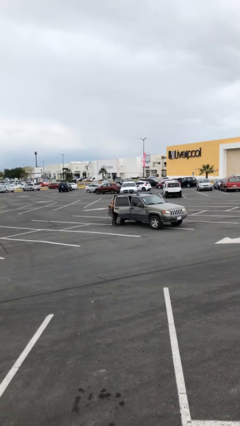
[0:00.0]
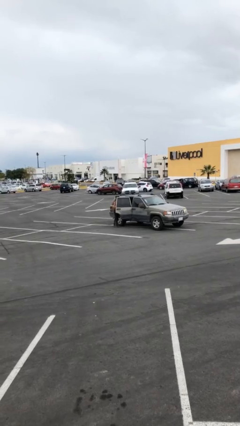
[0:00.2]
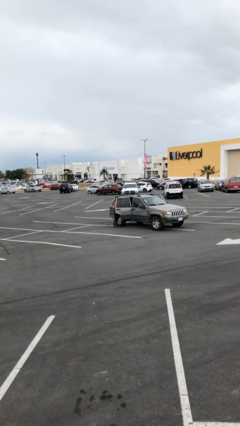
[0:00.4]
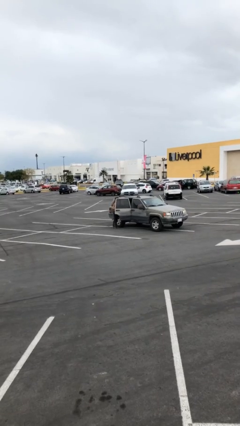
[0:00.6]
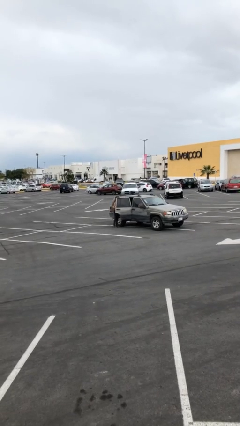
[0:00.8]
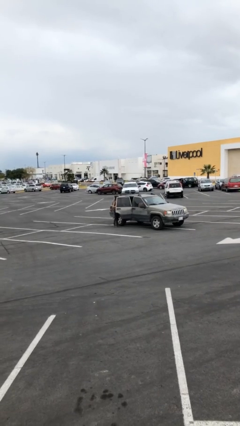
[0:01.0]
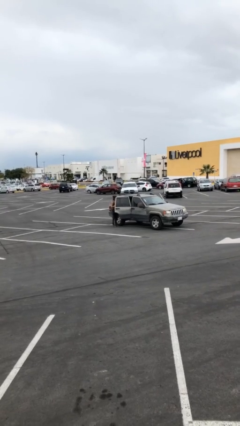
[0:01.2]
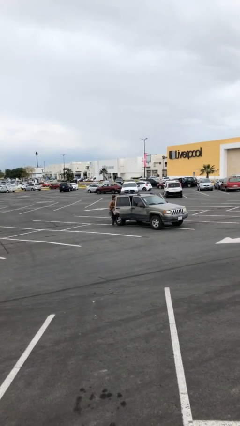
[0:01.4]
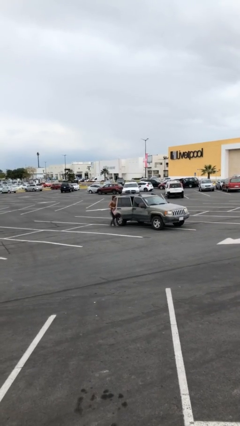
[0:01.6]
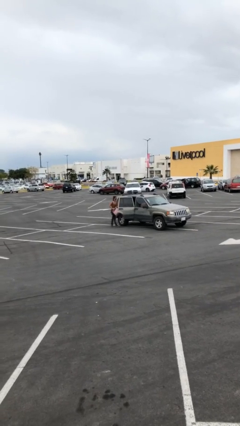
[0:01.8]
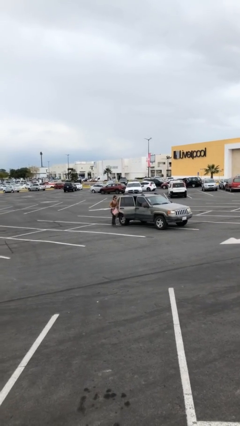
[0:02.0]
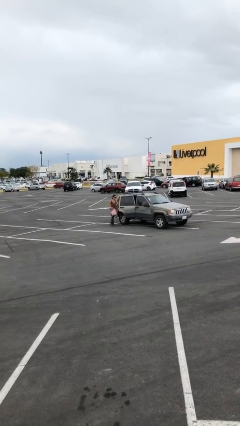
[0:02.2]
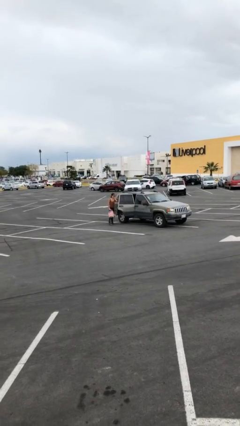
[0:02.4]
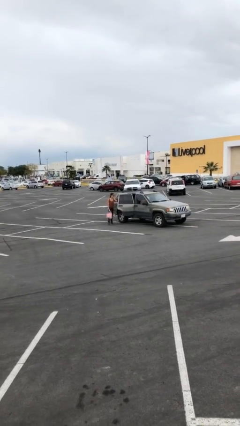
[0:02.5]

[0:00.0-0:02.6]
person unloads car

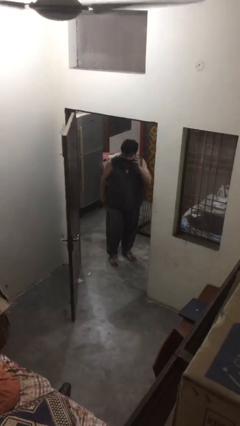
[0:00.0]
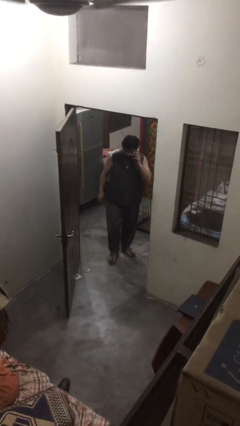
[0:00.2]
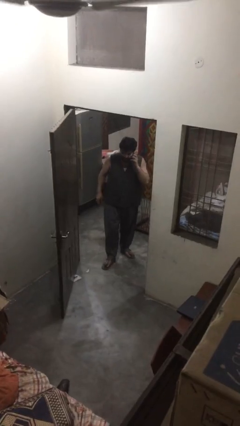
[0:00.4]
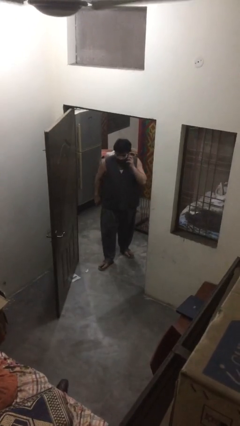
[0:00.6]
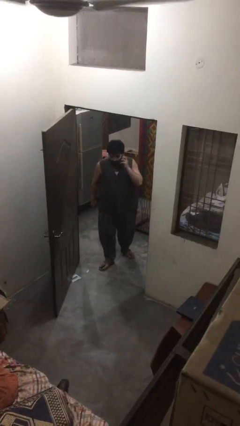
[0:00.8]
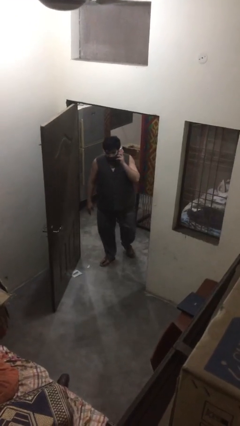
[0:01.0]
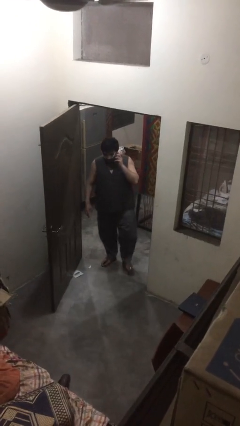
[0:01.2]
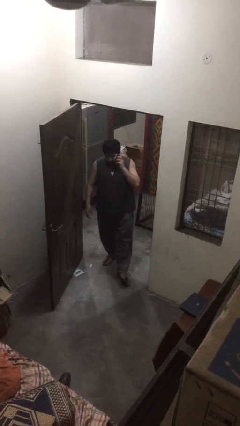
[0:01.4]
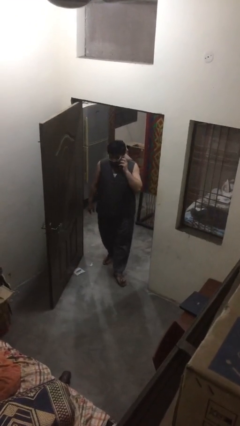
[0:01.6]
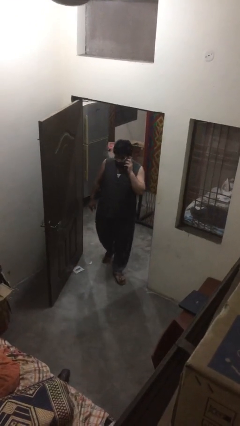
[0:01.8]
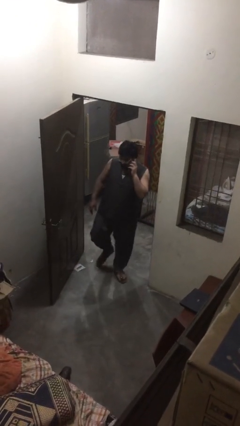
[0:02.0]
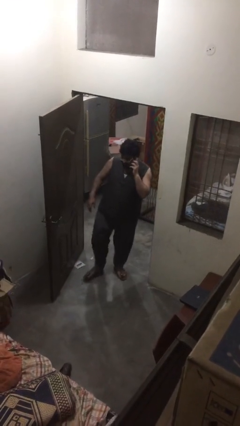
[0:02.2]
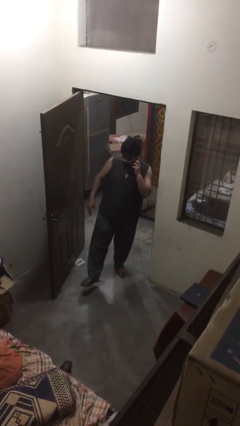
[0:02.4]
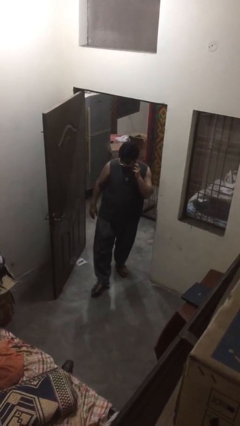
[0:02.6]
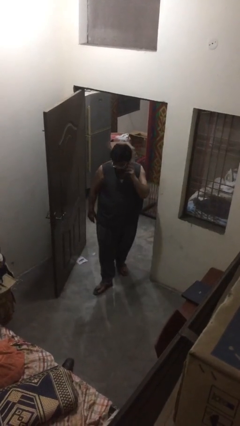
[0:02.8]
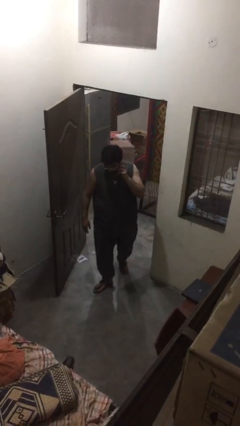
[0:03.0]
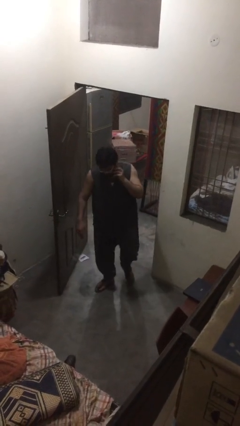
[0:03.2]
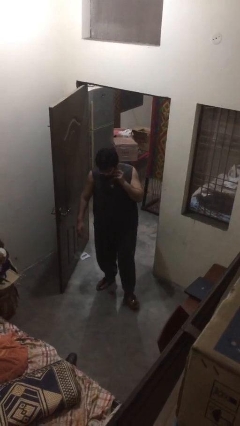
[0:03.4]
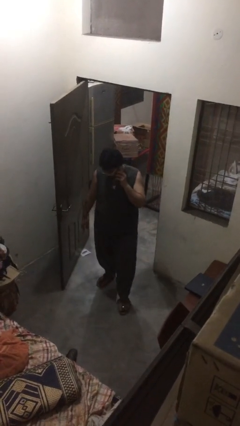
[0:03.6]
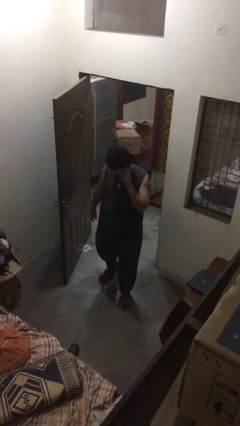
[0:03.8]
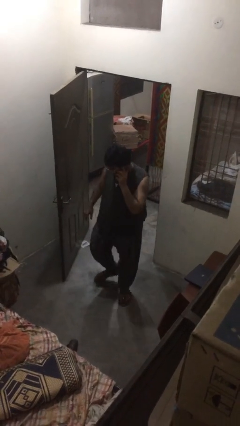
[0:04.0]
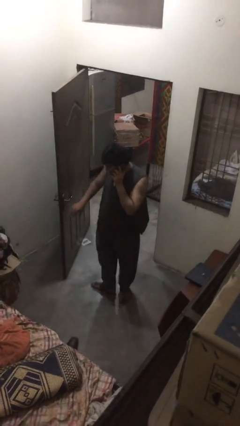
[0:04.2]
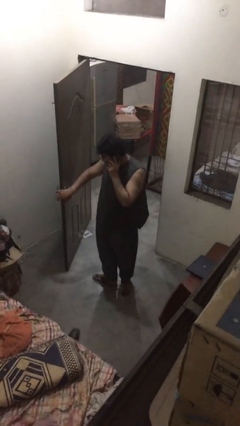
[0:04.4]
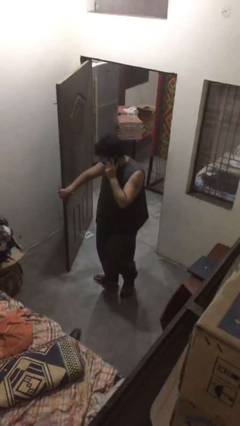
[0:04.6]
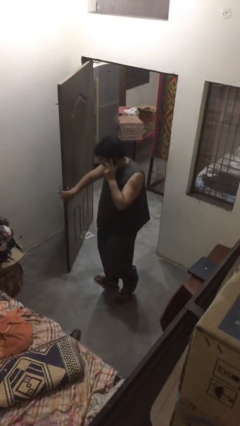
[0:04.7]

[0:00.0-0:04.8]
person enters scene through structure

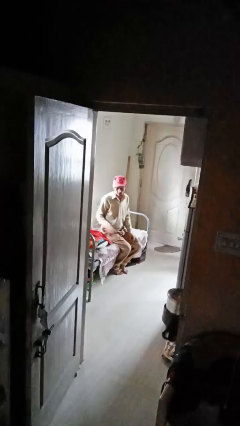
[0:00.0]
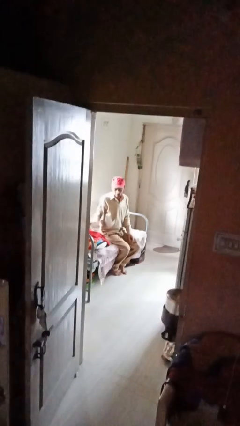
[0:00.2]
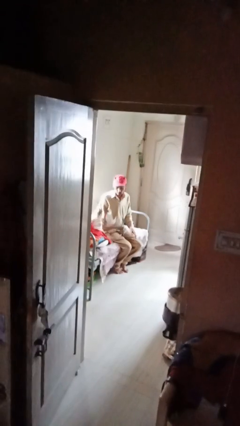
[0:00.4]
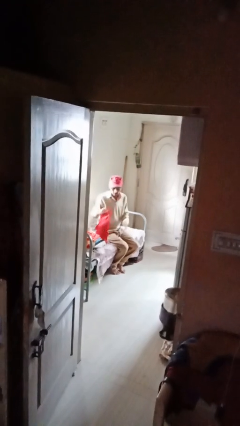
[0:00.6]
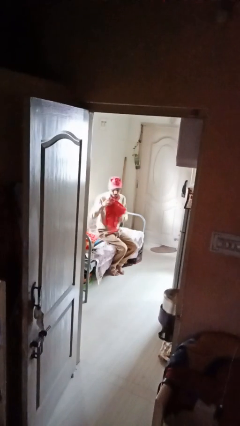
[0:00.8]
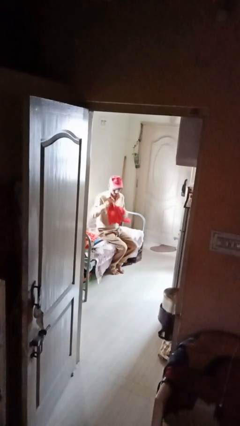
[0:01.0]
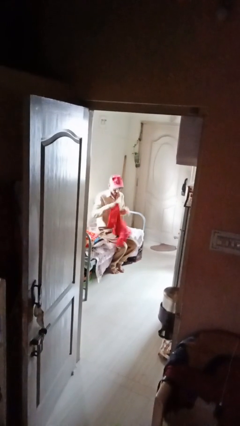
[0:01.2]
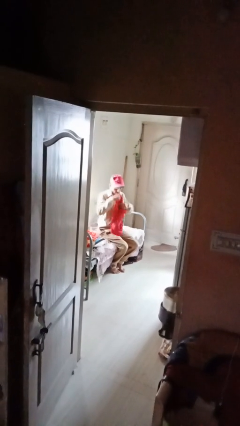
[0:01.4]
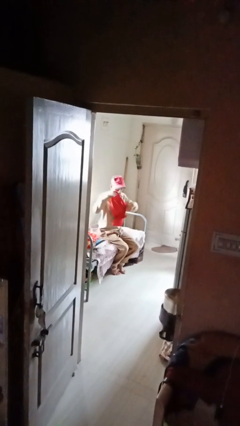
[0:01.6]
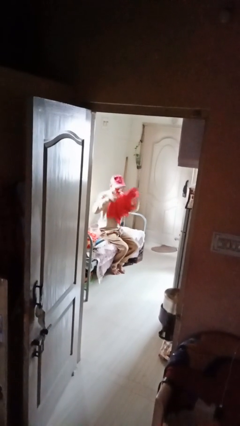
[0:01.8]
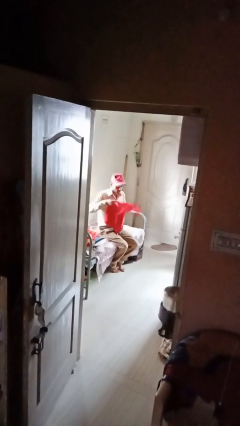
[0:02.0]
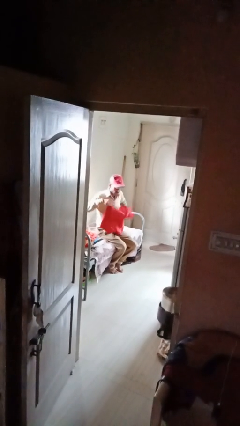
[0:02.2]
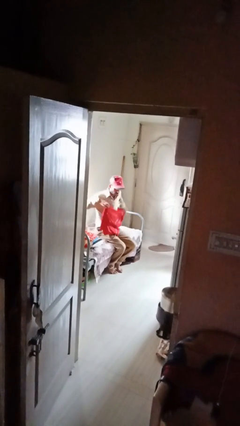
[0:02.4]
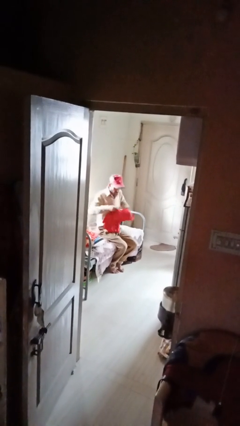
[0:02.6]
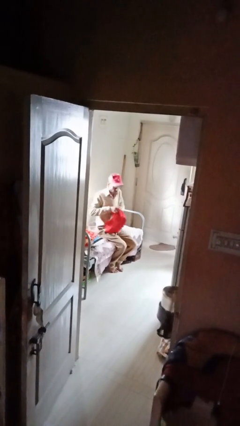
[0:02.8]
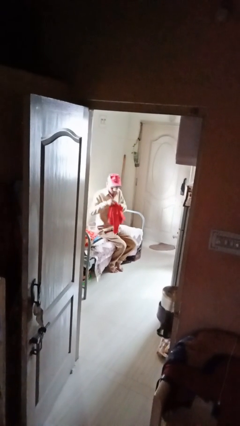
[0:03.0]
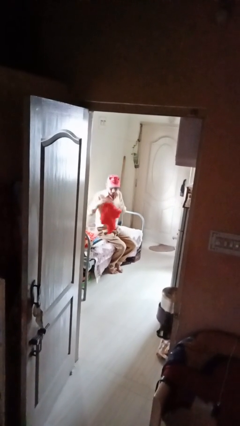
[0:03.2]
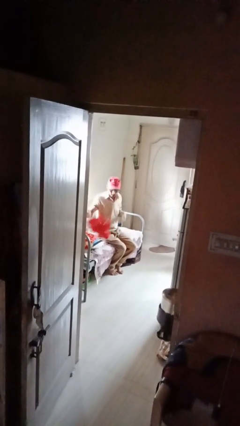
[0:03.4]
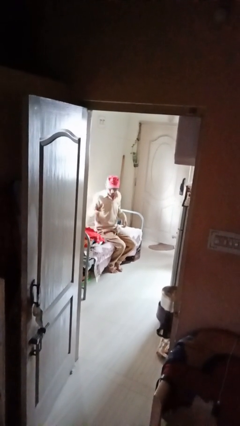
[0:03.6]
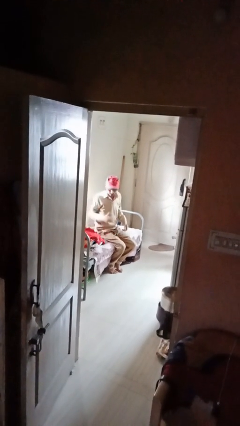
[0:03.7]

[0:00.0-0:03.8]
person folds shirt

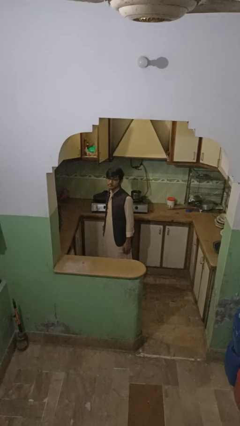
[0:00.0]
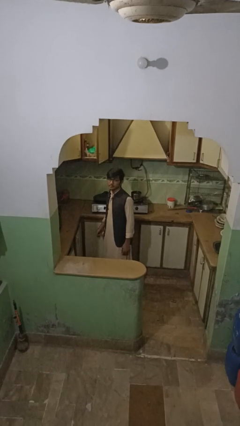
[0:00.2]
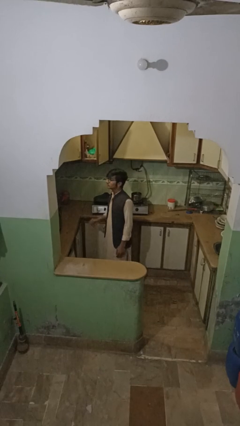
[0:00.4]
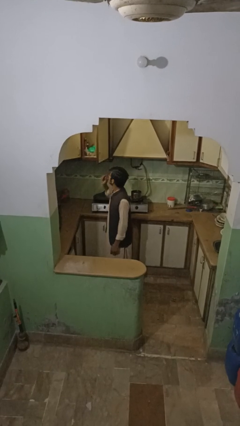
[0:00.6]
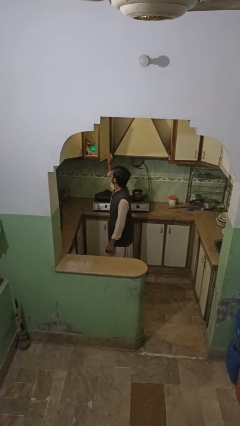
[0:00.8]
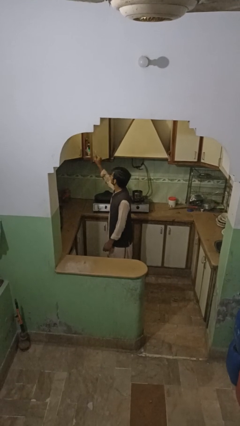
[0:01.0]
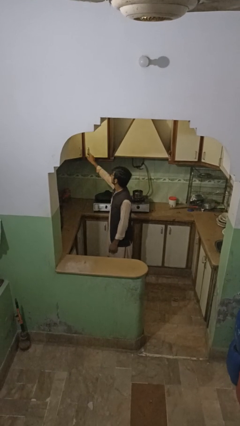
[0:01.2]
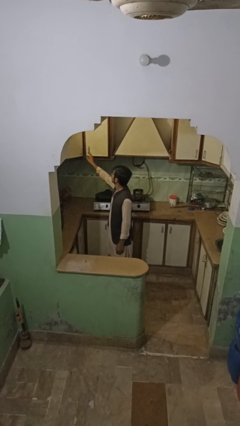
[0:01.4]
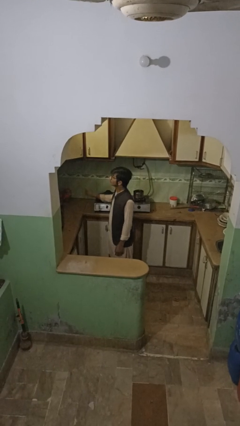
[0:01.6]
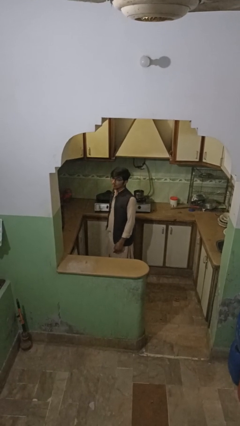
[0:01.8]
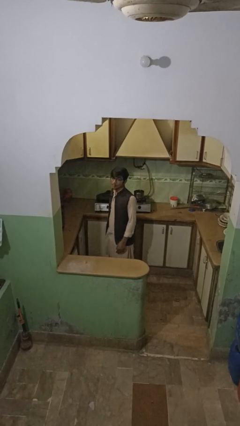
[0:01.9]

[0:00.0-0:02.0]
person closes cabinet

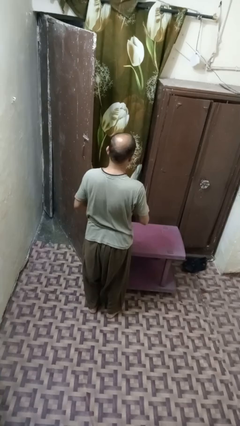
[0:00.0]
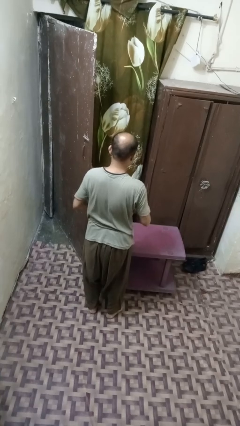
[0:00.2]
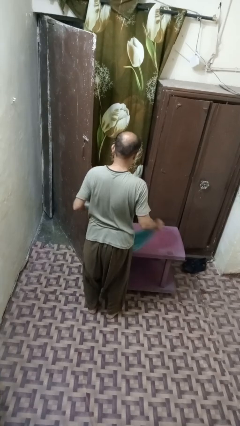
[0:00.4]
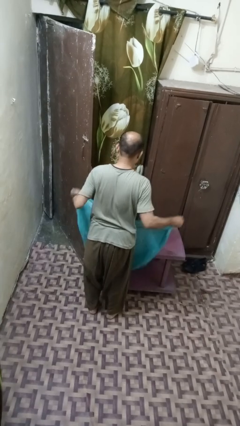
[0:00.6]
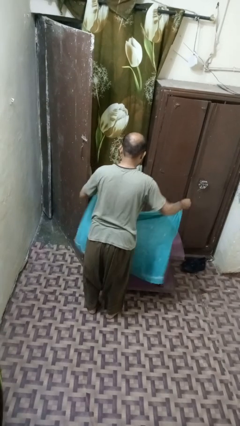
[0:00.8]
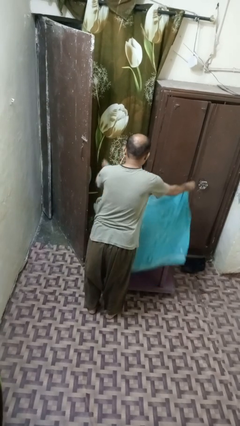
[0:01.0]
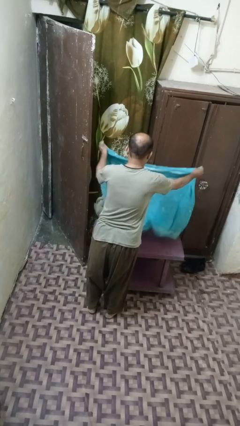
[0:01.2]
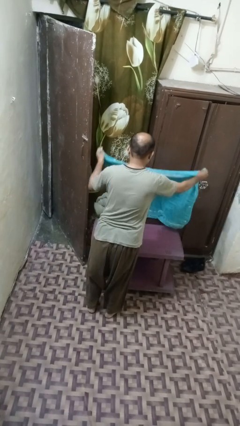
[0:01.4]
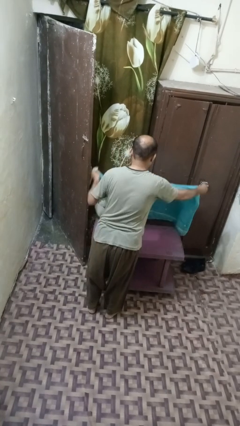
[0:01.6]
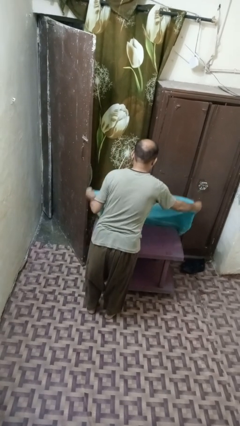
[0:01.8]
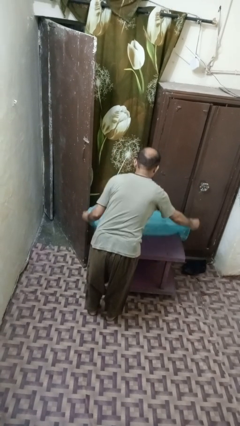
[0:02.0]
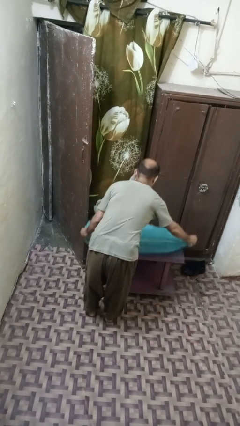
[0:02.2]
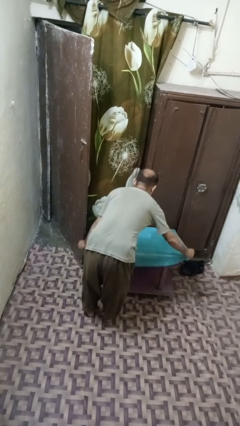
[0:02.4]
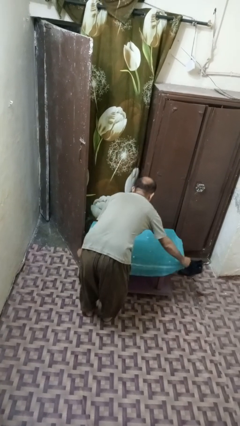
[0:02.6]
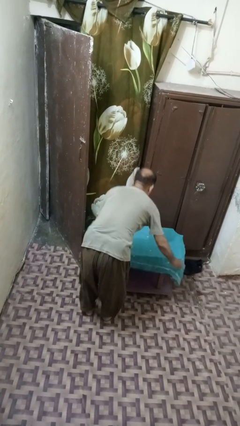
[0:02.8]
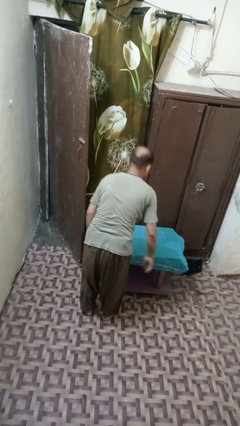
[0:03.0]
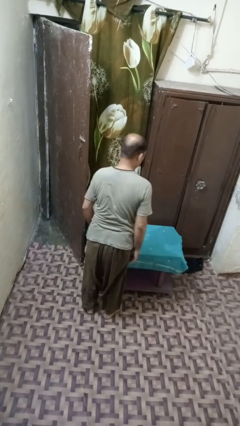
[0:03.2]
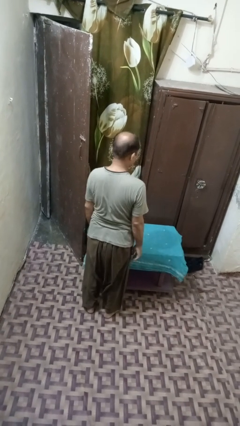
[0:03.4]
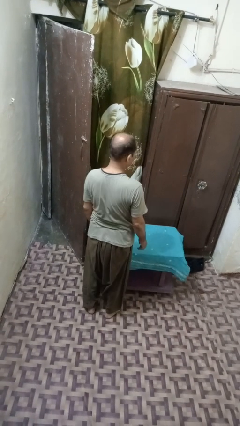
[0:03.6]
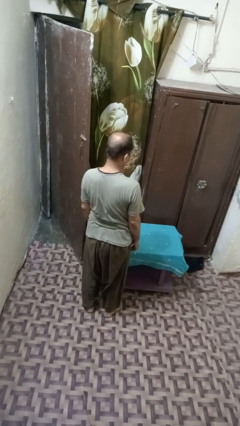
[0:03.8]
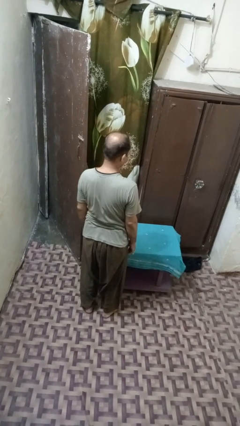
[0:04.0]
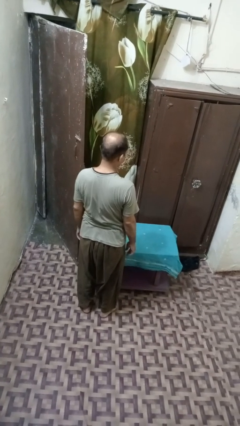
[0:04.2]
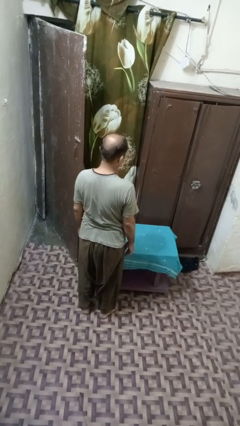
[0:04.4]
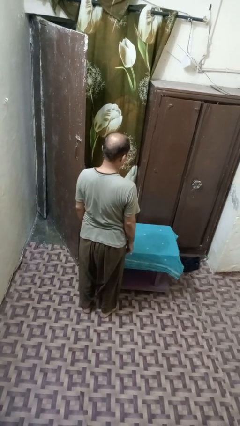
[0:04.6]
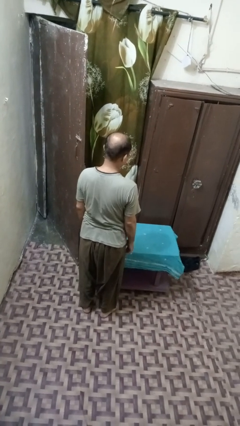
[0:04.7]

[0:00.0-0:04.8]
person spreads tablecloth
